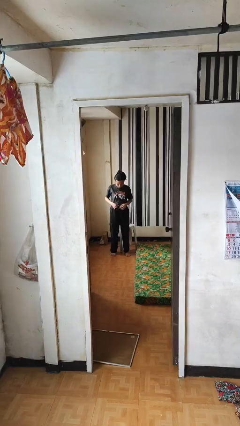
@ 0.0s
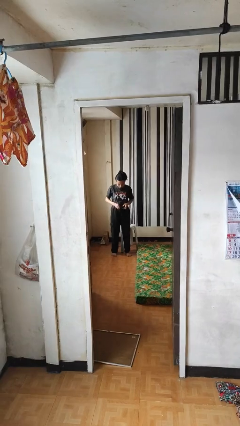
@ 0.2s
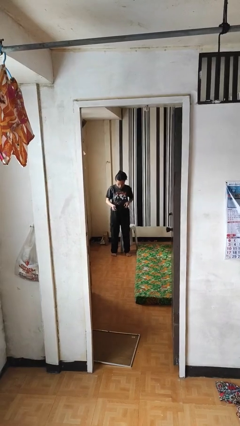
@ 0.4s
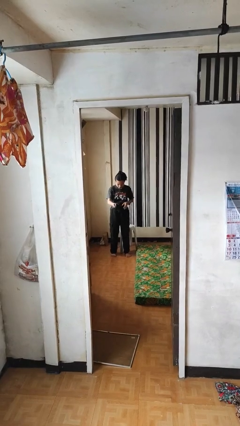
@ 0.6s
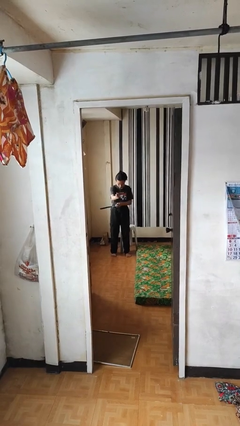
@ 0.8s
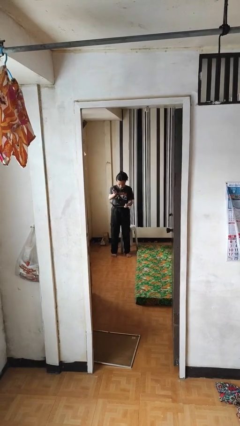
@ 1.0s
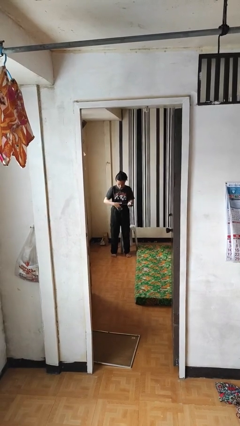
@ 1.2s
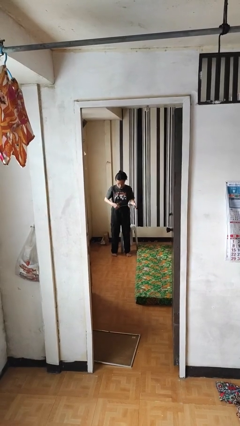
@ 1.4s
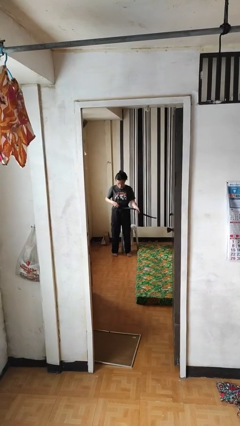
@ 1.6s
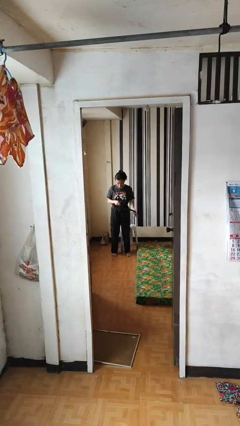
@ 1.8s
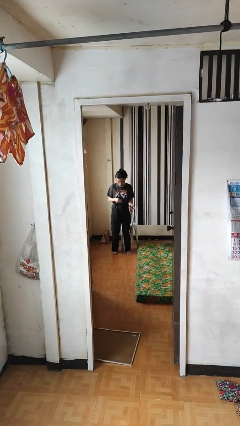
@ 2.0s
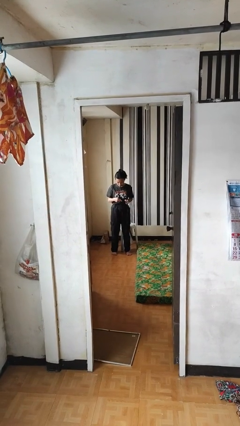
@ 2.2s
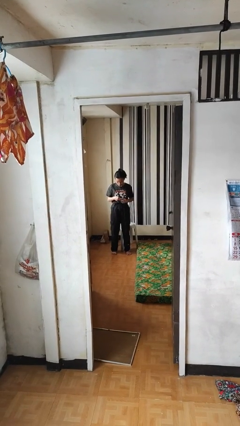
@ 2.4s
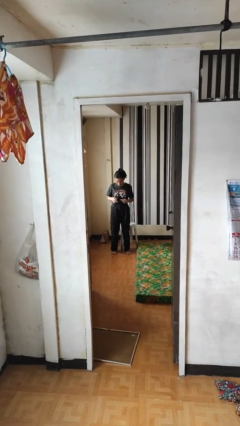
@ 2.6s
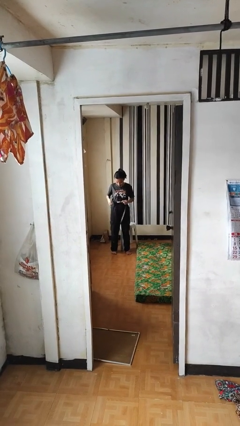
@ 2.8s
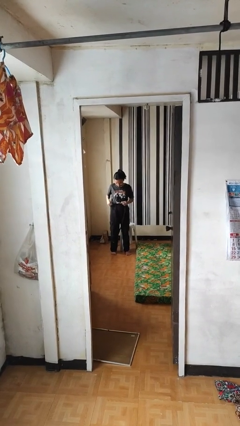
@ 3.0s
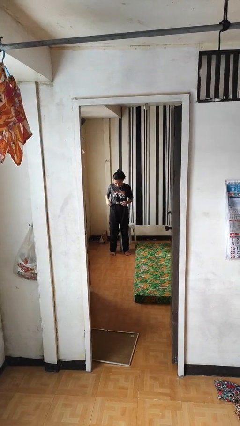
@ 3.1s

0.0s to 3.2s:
person takes off belt

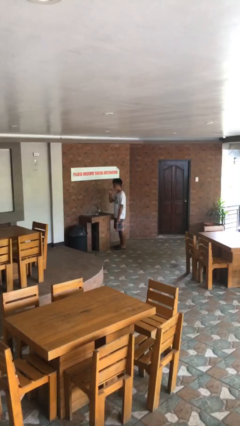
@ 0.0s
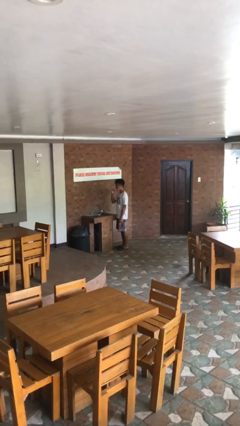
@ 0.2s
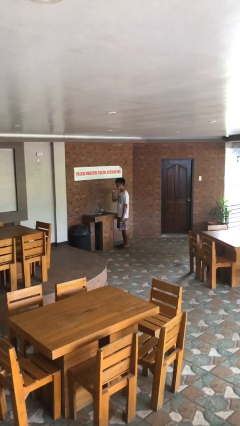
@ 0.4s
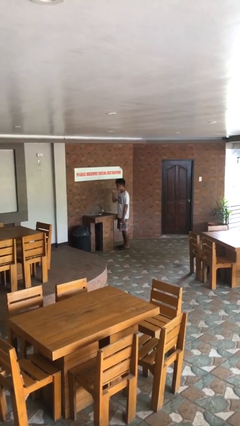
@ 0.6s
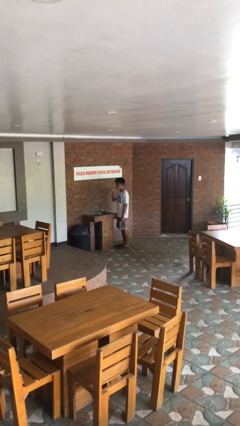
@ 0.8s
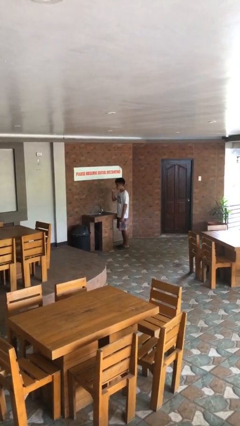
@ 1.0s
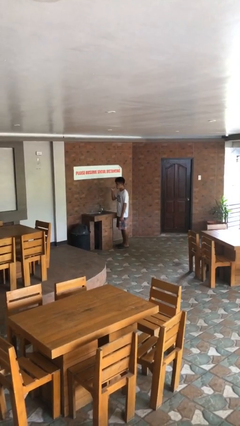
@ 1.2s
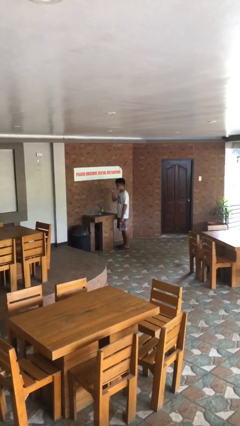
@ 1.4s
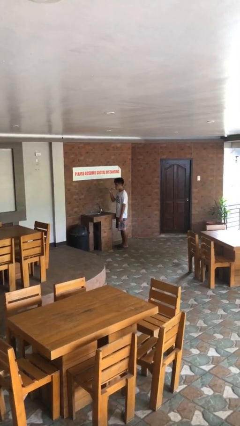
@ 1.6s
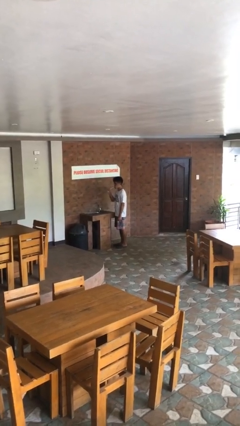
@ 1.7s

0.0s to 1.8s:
person brushes teeth

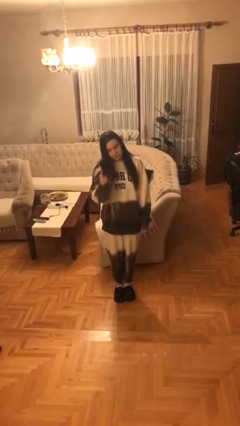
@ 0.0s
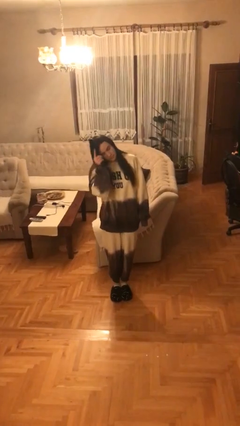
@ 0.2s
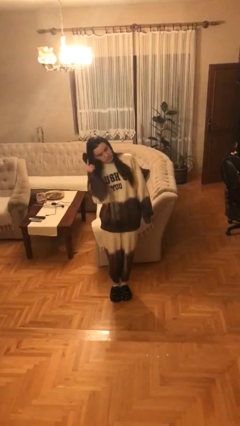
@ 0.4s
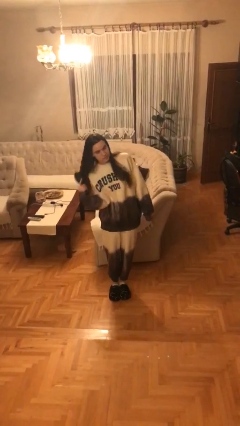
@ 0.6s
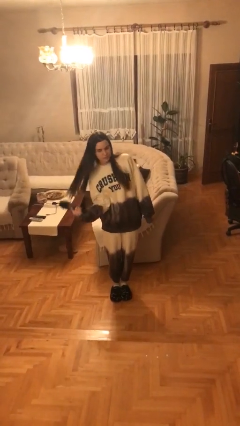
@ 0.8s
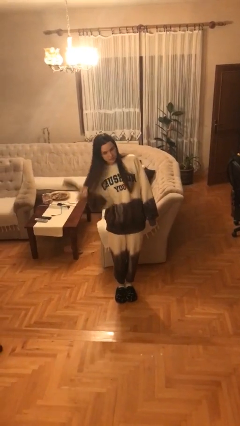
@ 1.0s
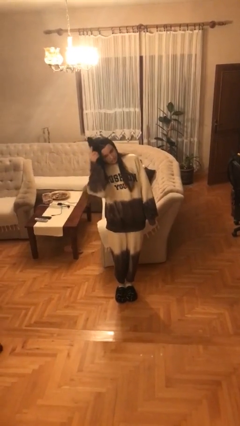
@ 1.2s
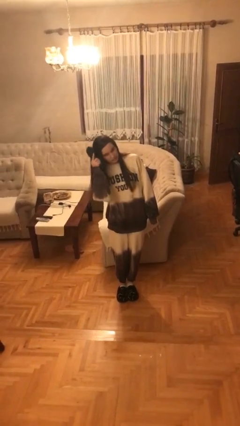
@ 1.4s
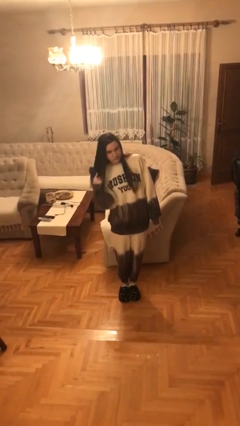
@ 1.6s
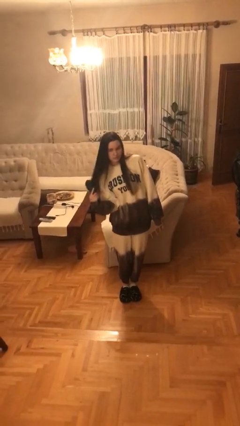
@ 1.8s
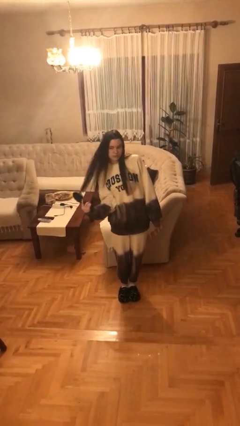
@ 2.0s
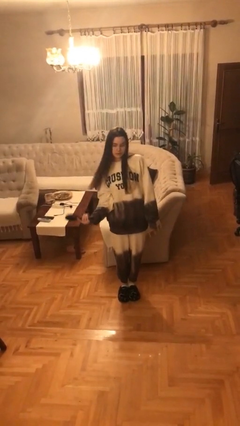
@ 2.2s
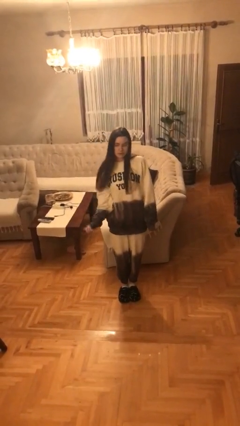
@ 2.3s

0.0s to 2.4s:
person brushes hair

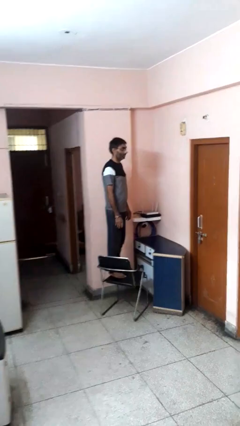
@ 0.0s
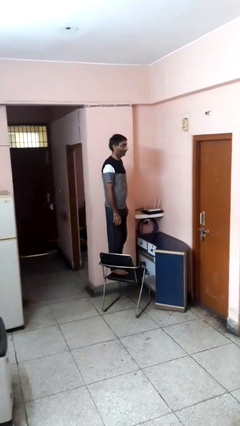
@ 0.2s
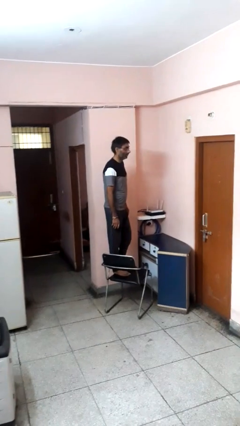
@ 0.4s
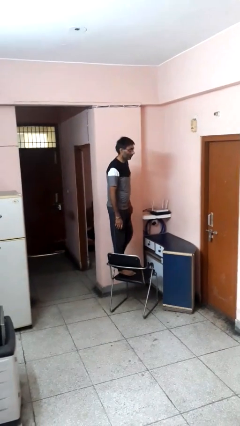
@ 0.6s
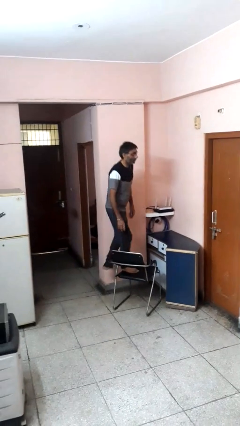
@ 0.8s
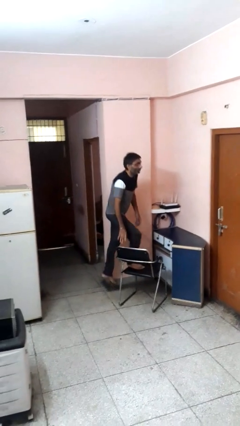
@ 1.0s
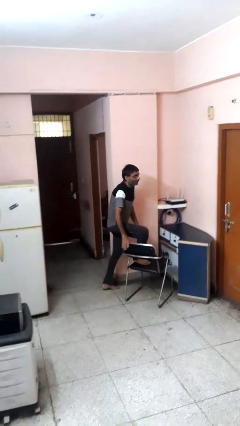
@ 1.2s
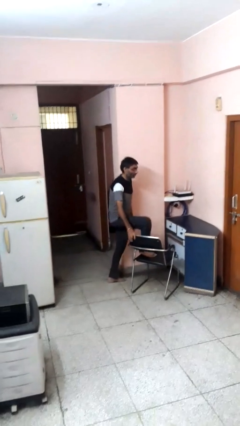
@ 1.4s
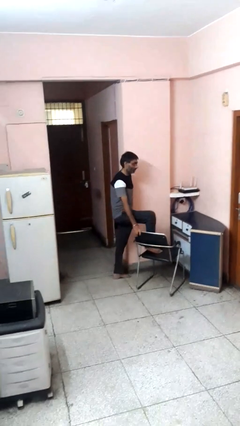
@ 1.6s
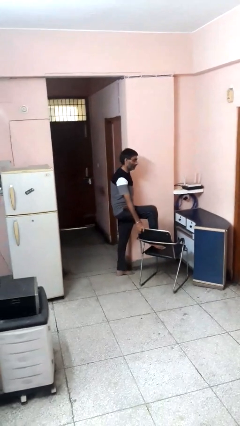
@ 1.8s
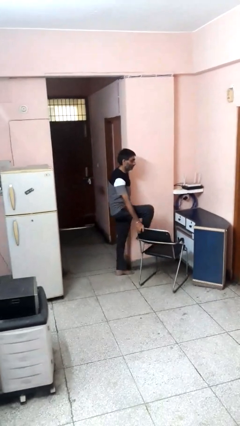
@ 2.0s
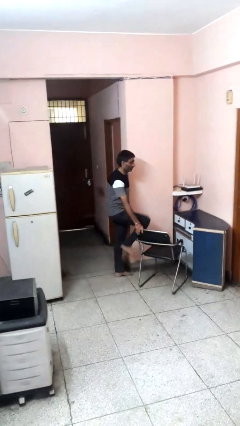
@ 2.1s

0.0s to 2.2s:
person climbs off chair

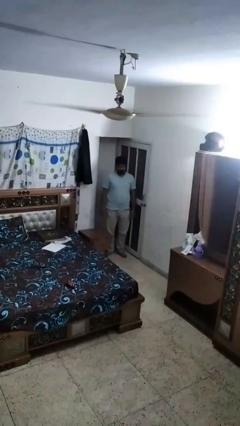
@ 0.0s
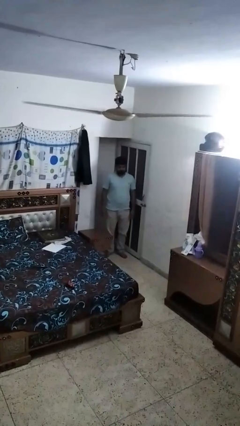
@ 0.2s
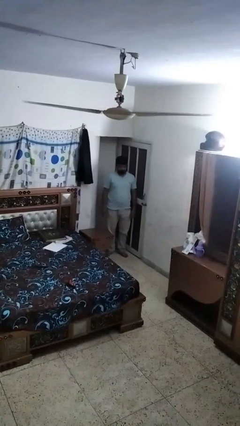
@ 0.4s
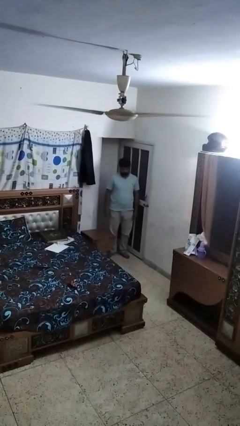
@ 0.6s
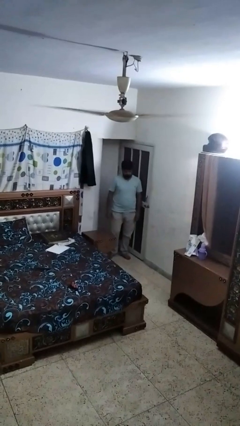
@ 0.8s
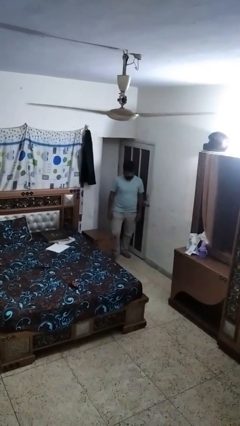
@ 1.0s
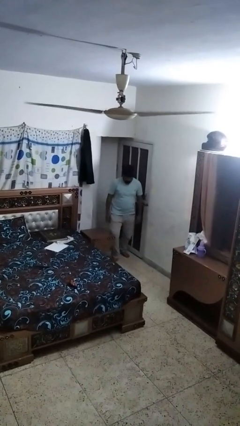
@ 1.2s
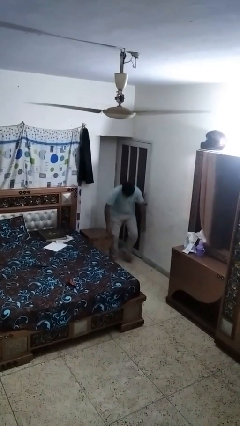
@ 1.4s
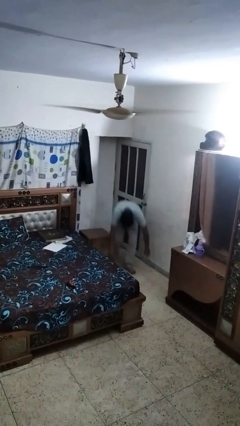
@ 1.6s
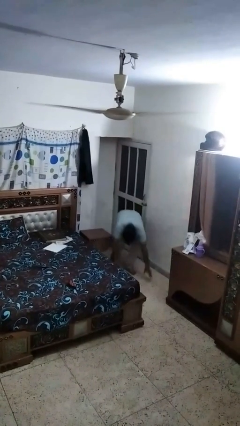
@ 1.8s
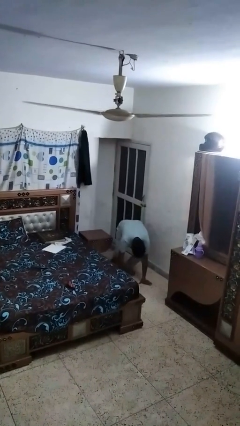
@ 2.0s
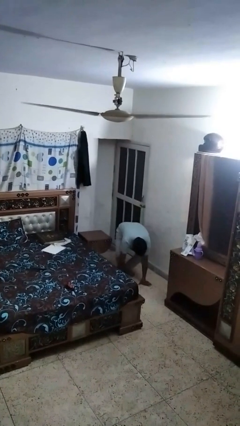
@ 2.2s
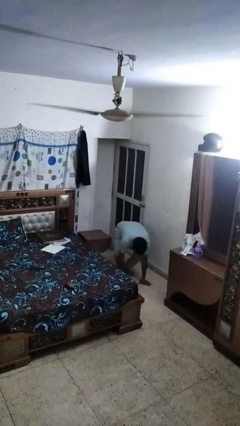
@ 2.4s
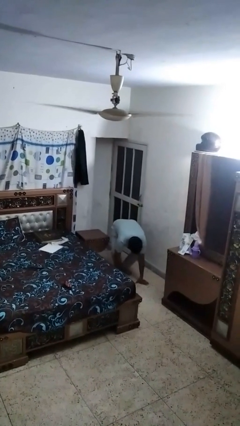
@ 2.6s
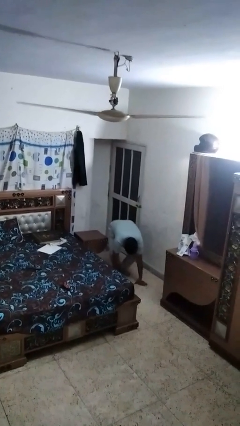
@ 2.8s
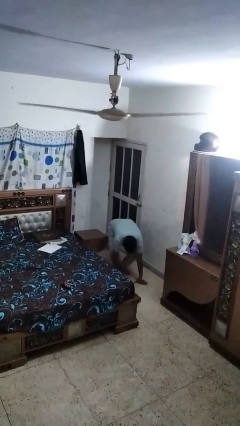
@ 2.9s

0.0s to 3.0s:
person trips on object on floor

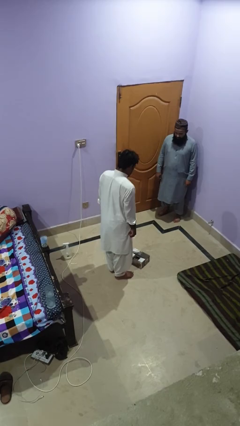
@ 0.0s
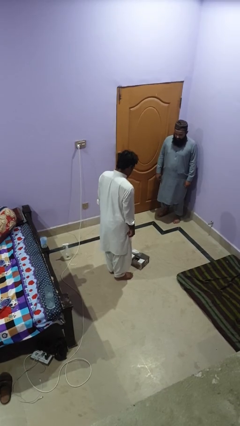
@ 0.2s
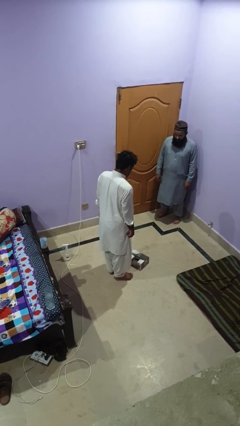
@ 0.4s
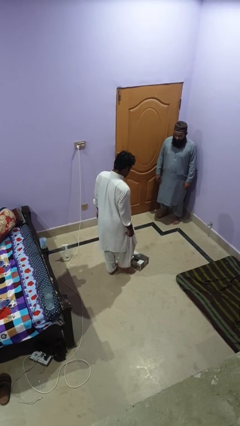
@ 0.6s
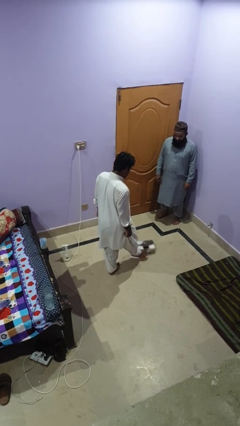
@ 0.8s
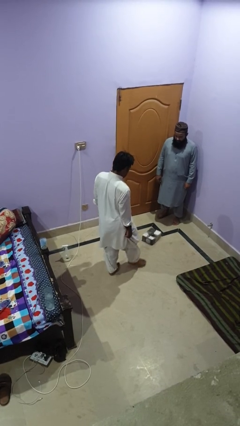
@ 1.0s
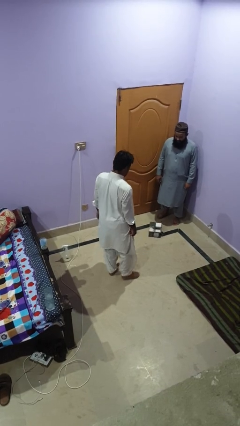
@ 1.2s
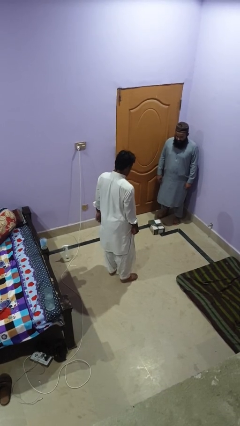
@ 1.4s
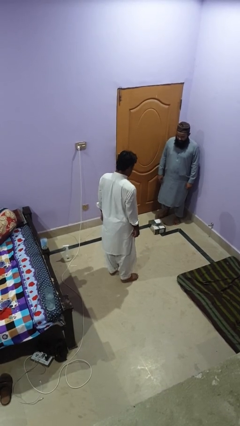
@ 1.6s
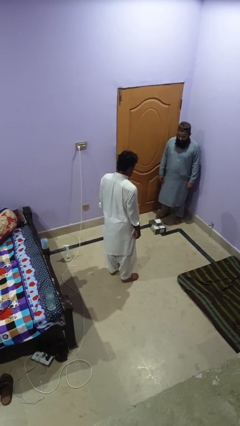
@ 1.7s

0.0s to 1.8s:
person kicks object to person

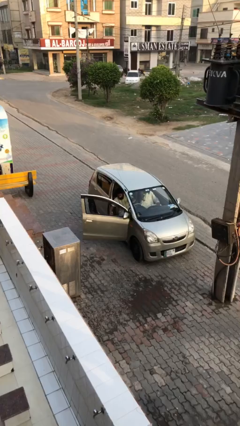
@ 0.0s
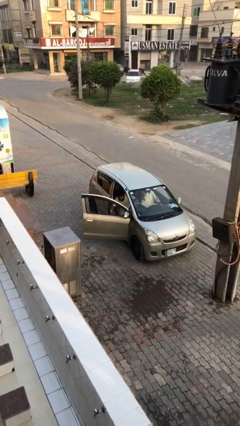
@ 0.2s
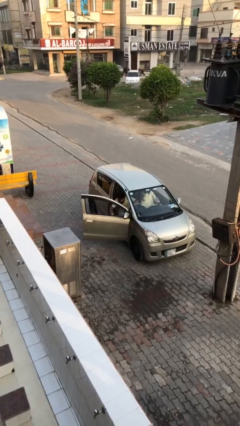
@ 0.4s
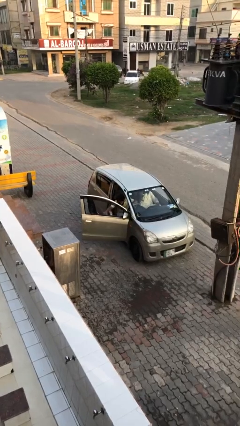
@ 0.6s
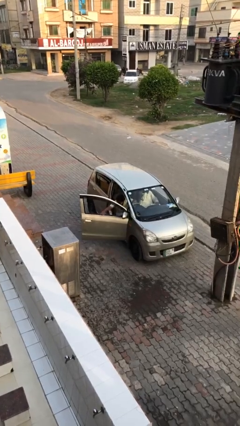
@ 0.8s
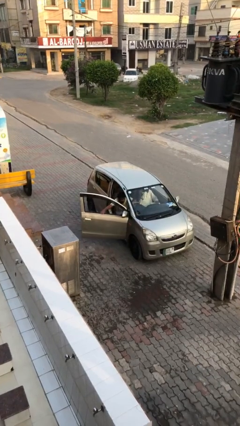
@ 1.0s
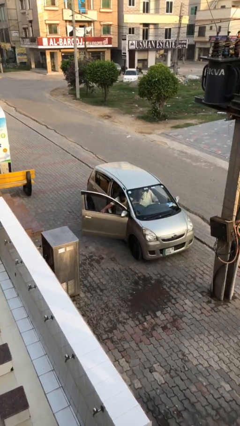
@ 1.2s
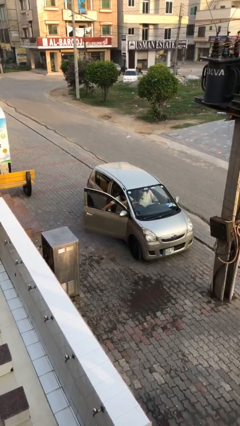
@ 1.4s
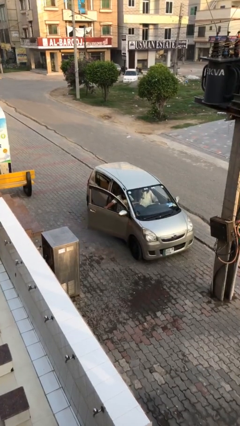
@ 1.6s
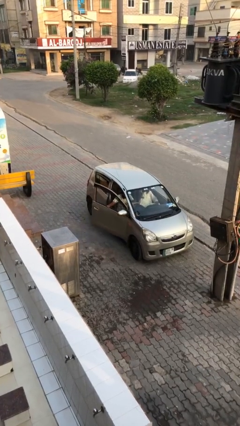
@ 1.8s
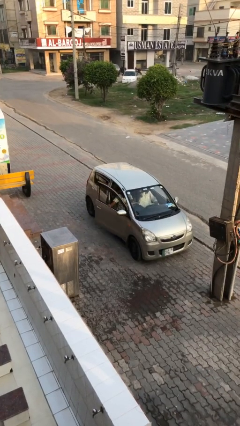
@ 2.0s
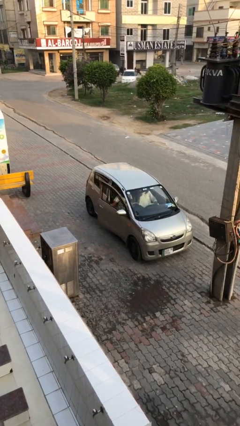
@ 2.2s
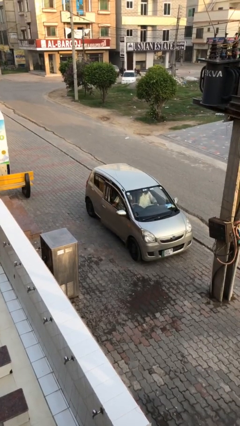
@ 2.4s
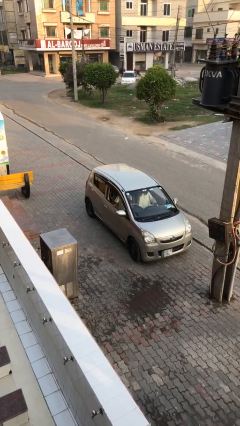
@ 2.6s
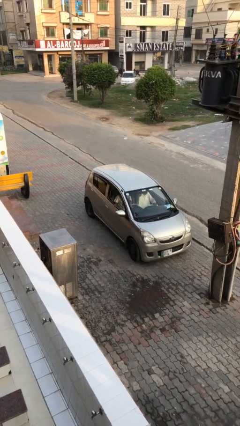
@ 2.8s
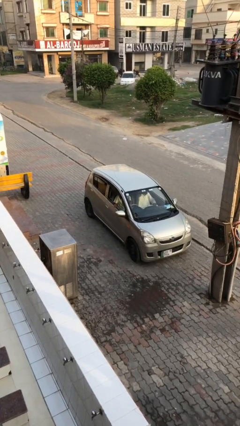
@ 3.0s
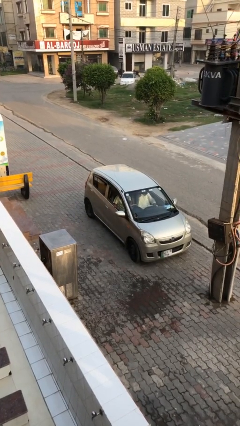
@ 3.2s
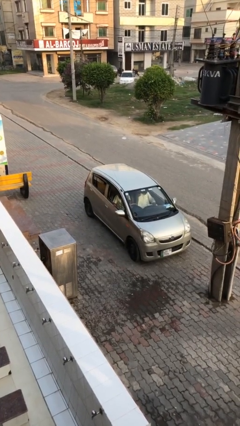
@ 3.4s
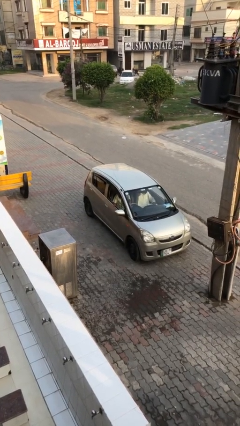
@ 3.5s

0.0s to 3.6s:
person closes car door
